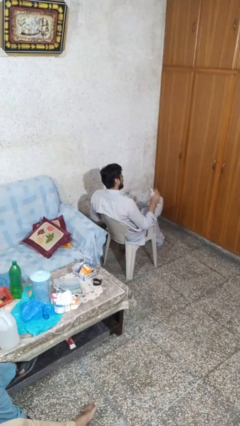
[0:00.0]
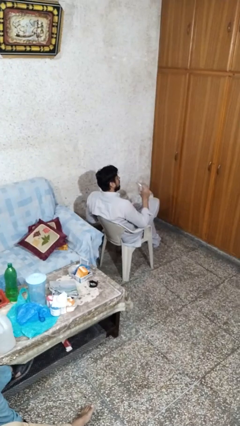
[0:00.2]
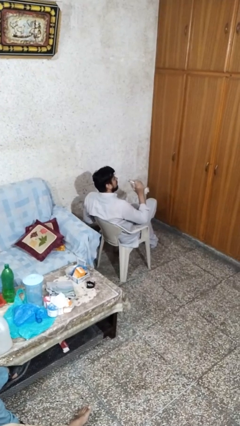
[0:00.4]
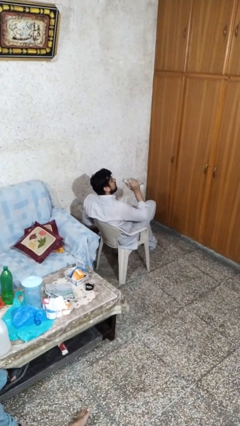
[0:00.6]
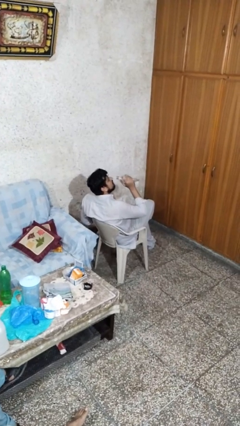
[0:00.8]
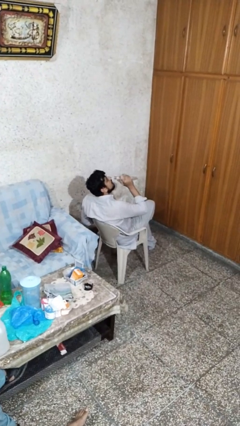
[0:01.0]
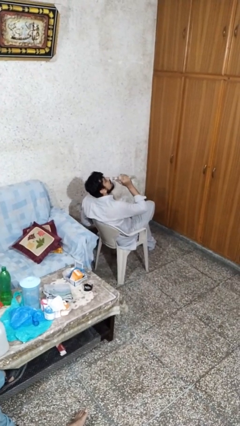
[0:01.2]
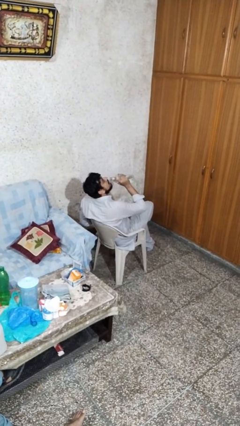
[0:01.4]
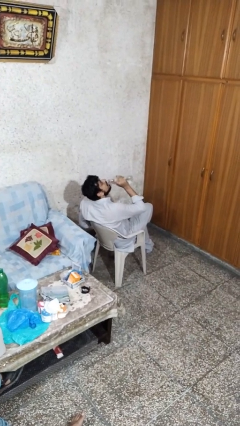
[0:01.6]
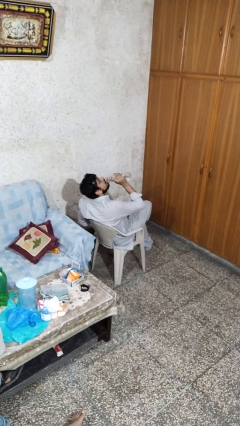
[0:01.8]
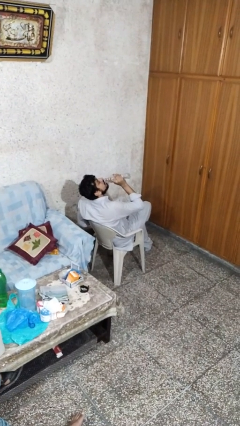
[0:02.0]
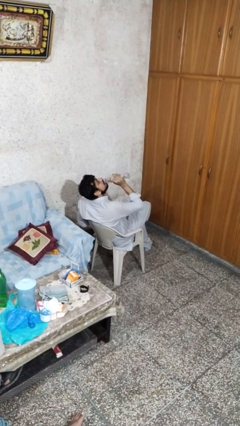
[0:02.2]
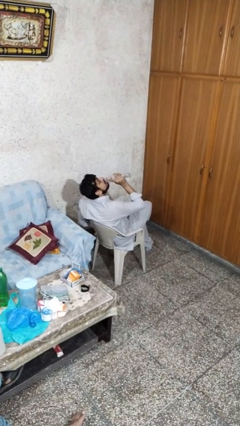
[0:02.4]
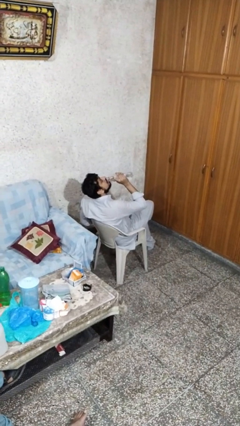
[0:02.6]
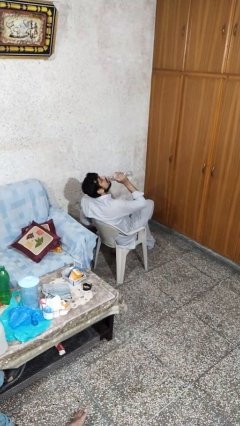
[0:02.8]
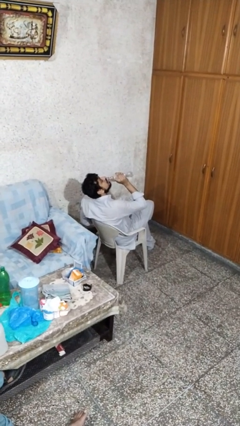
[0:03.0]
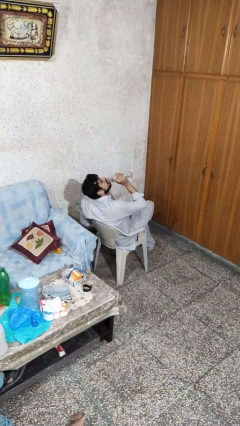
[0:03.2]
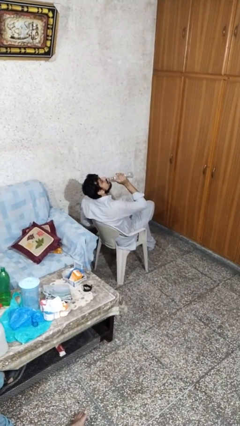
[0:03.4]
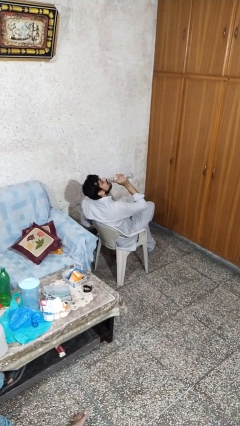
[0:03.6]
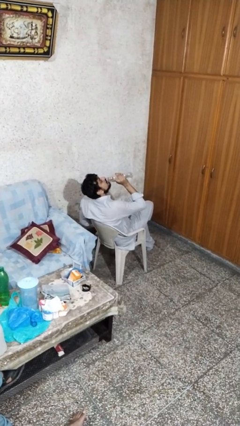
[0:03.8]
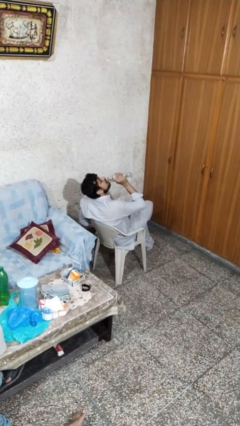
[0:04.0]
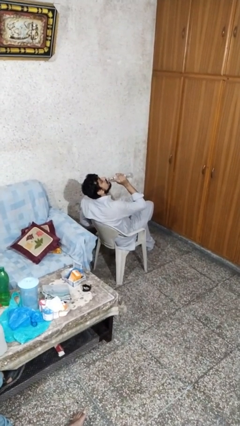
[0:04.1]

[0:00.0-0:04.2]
person drinks from bottle

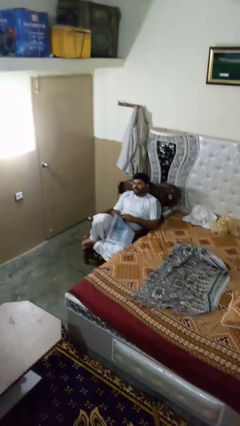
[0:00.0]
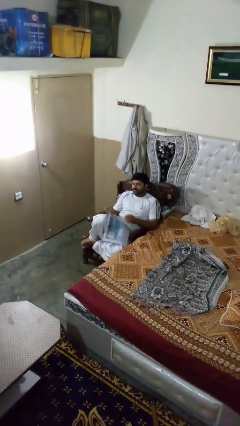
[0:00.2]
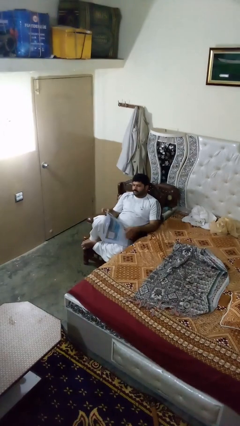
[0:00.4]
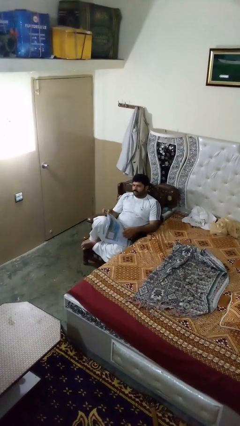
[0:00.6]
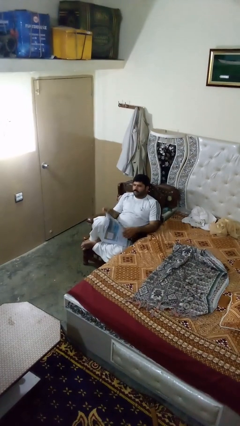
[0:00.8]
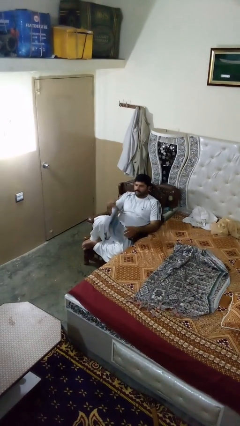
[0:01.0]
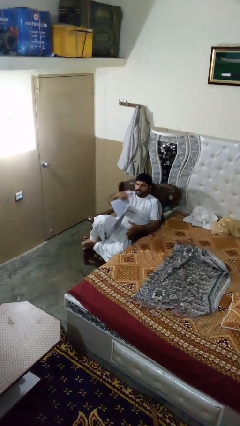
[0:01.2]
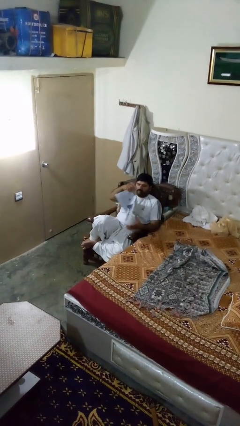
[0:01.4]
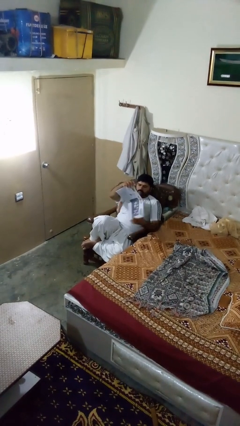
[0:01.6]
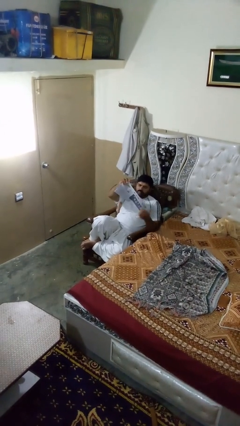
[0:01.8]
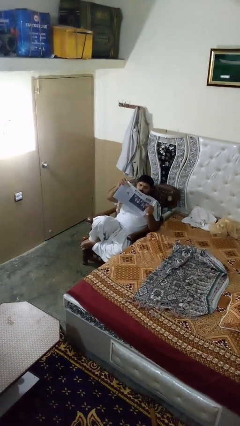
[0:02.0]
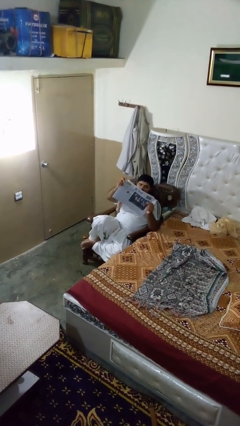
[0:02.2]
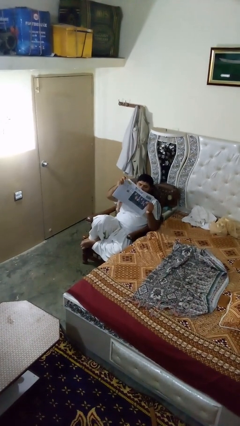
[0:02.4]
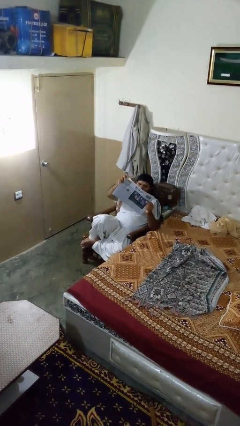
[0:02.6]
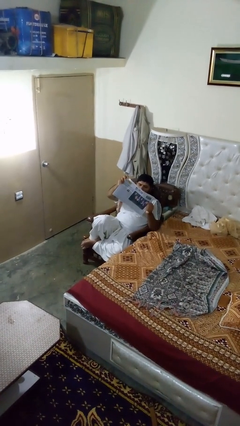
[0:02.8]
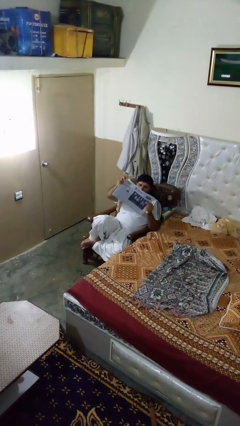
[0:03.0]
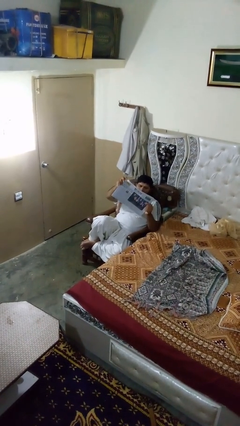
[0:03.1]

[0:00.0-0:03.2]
person reads newspaper

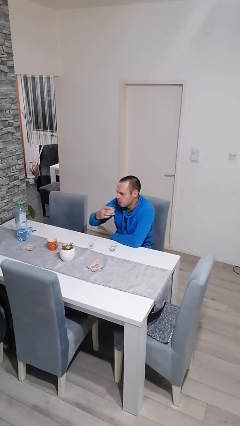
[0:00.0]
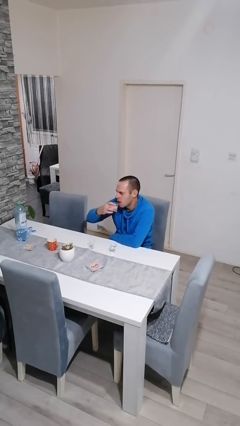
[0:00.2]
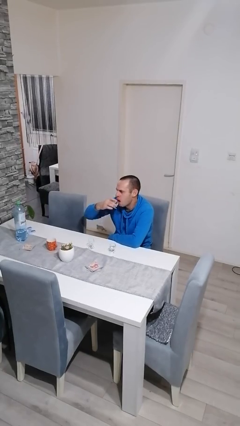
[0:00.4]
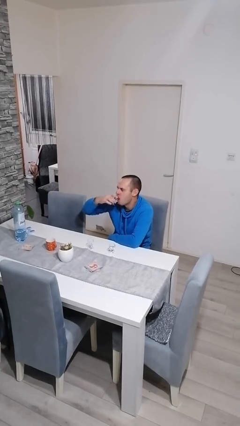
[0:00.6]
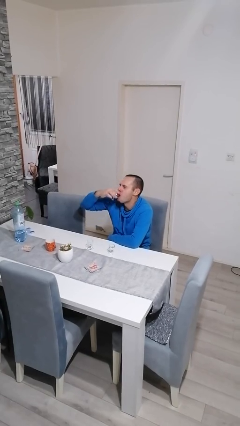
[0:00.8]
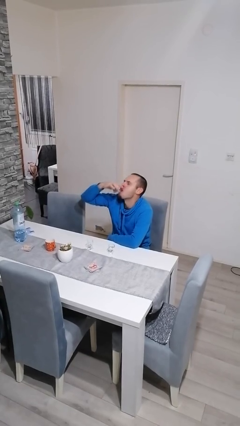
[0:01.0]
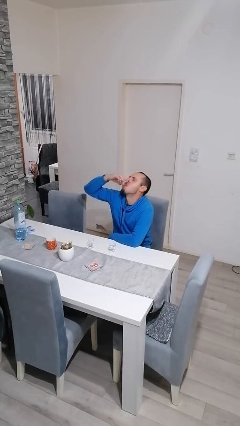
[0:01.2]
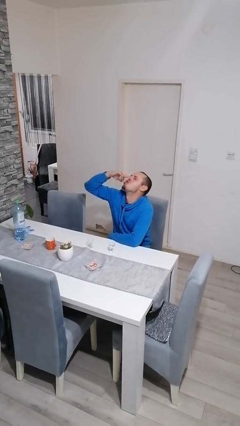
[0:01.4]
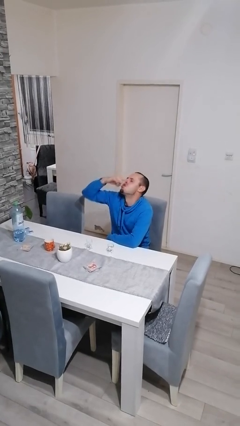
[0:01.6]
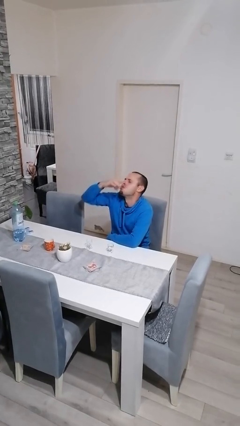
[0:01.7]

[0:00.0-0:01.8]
person drinks from shotglass

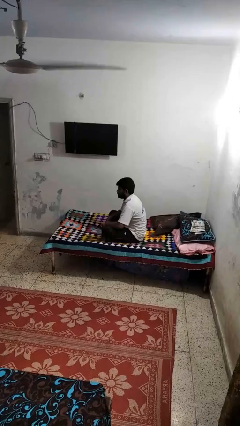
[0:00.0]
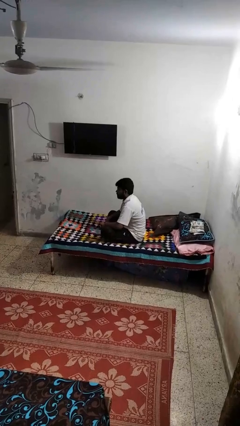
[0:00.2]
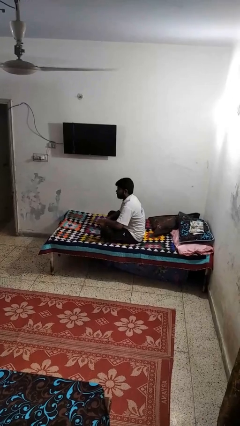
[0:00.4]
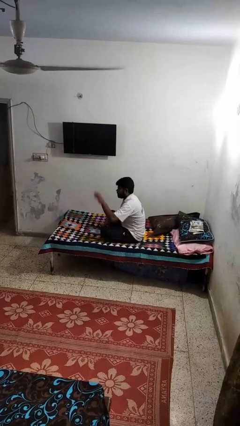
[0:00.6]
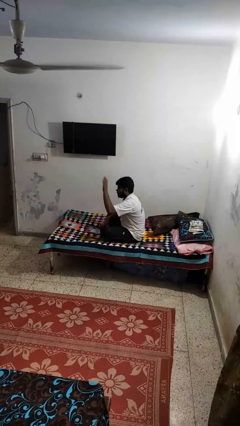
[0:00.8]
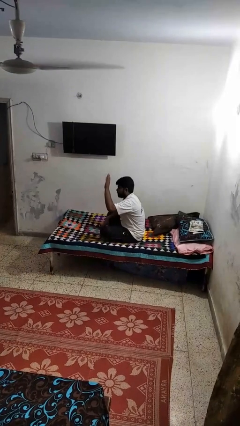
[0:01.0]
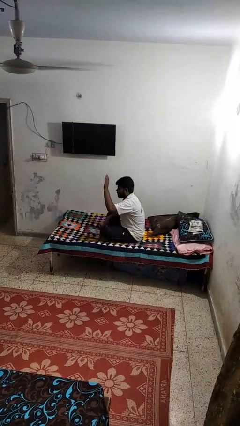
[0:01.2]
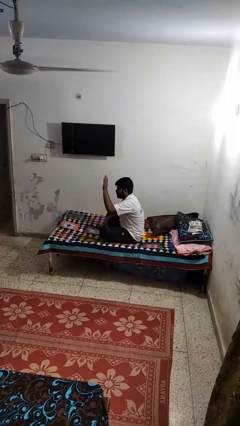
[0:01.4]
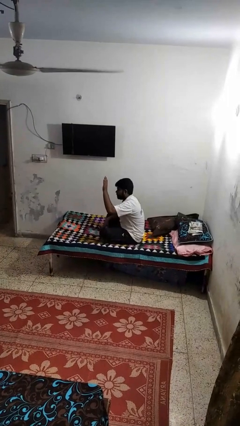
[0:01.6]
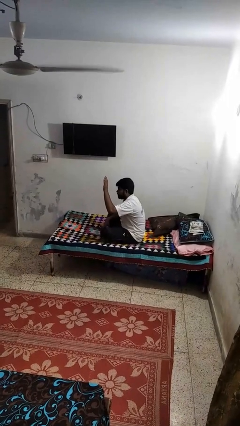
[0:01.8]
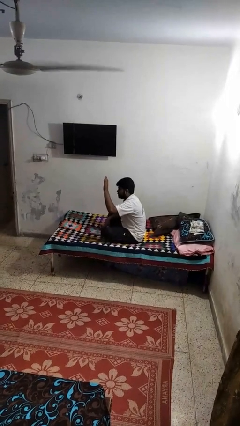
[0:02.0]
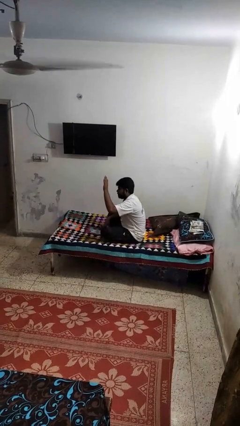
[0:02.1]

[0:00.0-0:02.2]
person gestures raise hand

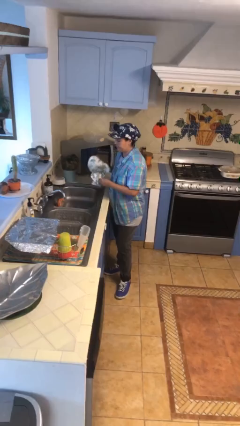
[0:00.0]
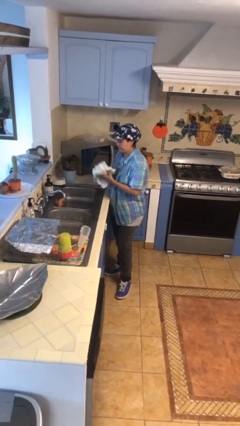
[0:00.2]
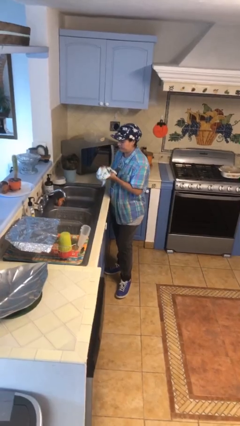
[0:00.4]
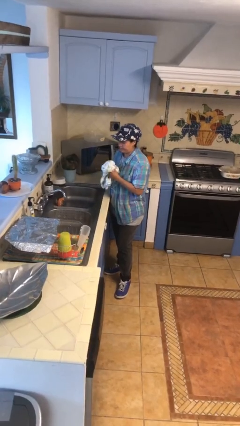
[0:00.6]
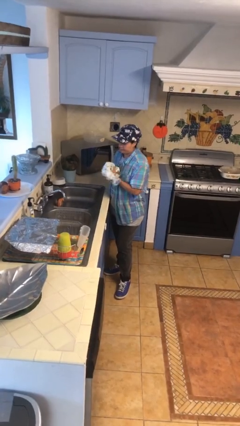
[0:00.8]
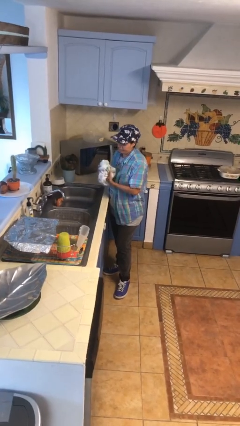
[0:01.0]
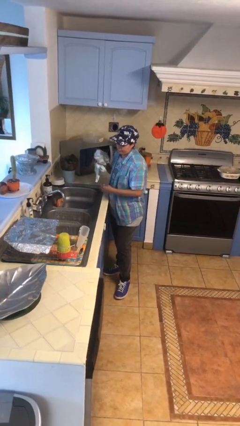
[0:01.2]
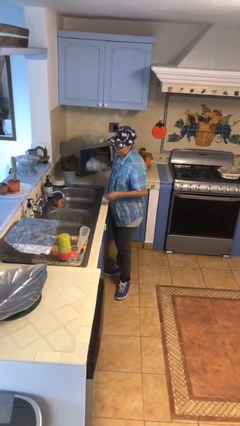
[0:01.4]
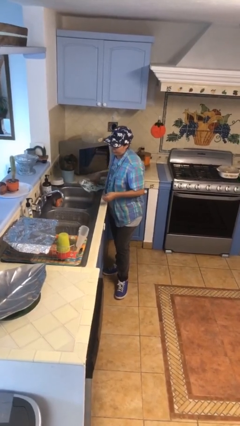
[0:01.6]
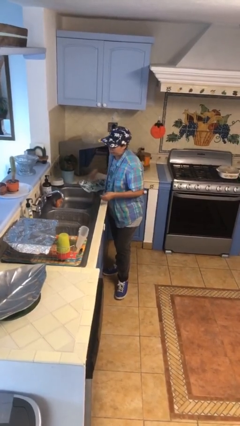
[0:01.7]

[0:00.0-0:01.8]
person dries hands with towel

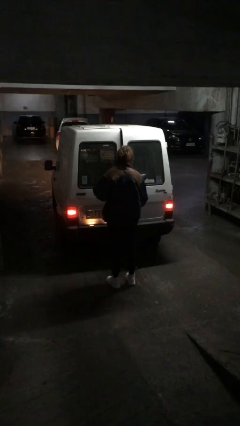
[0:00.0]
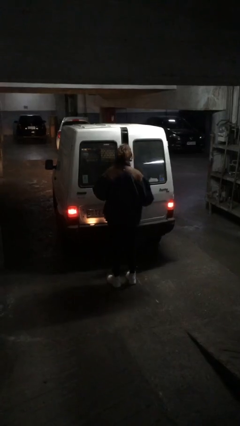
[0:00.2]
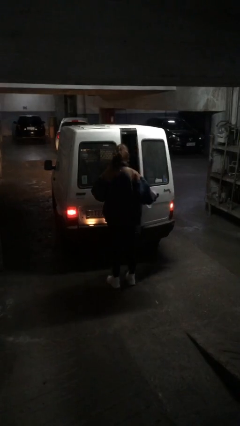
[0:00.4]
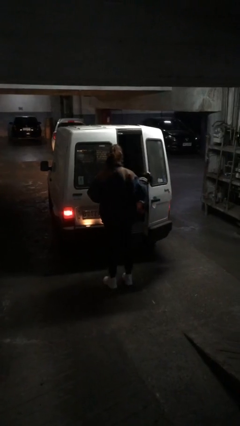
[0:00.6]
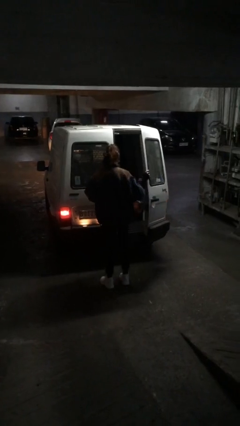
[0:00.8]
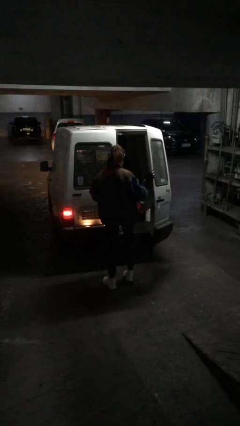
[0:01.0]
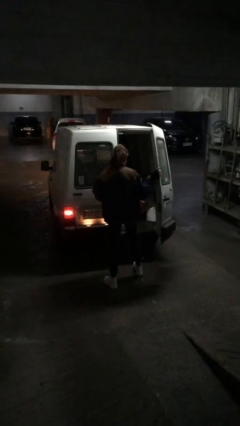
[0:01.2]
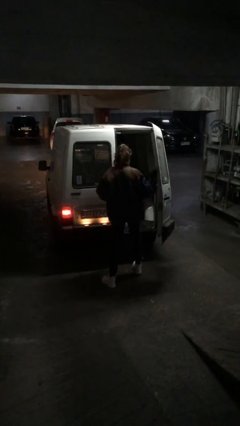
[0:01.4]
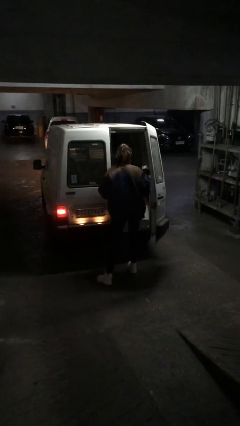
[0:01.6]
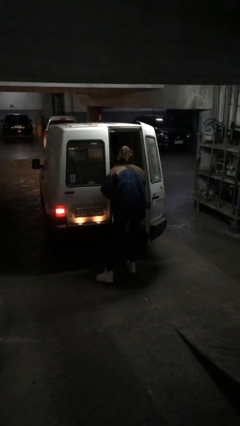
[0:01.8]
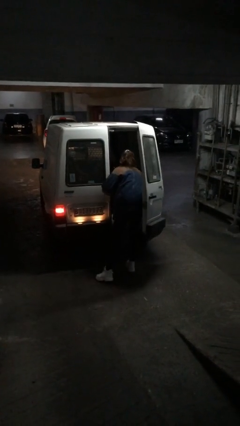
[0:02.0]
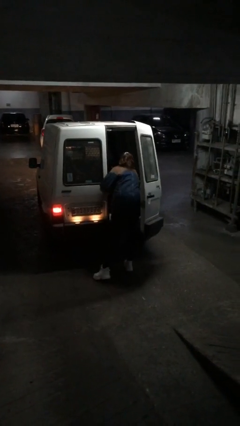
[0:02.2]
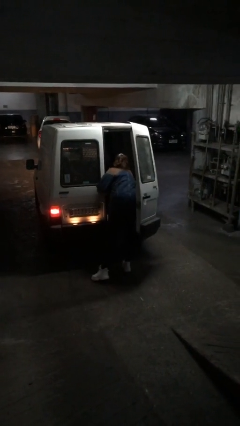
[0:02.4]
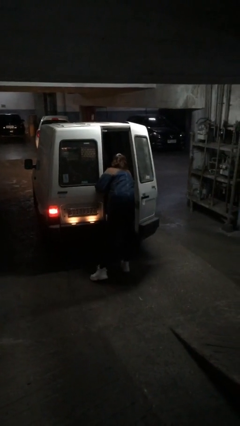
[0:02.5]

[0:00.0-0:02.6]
person opens car door

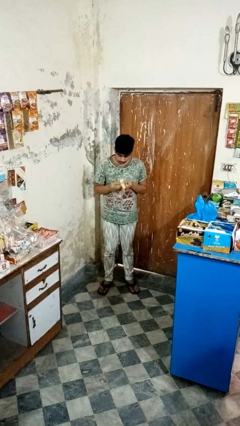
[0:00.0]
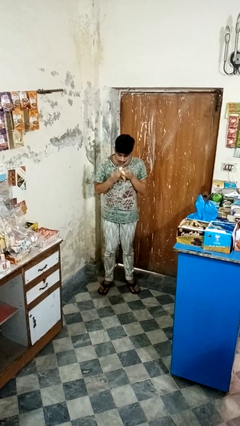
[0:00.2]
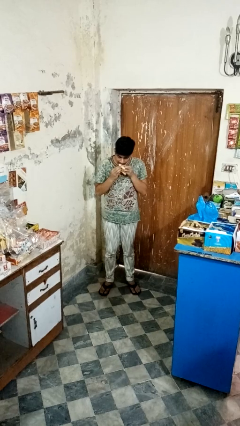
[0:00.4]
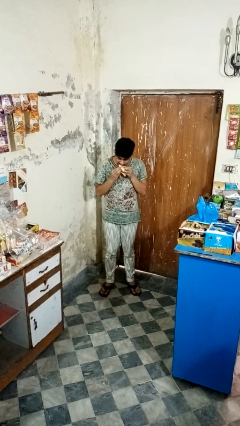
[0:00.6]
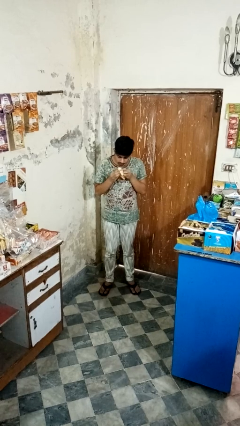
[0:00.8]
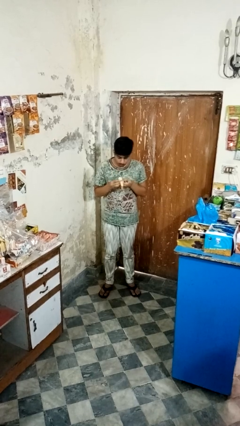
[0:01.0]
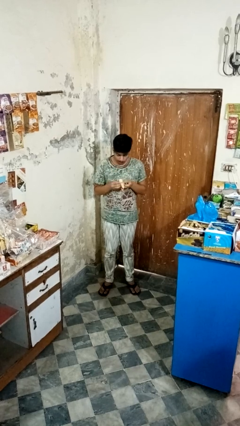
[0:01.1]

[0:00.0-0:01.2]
person eats banana
